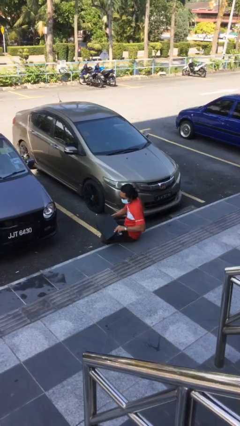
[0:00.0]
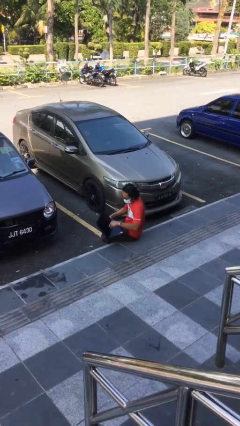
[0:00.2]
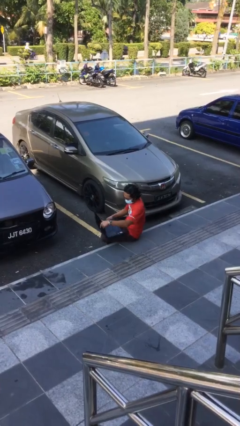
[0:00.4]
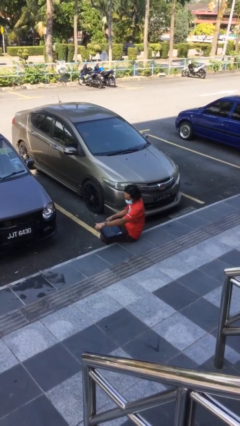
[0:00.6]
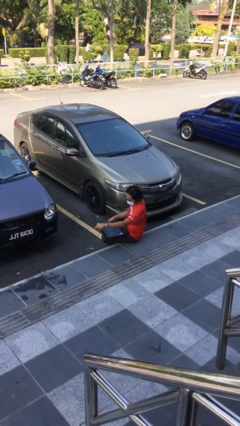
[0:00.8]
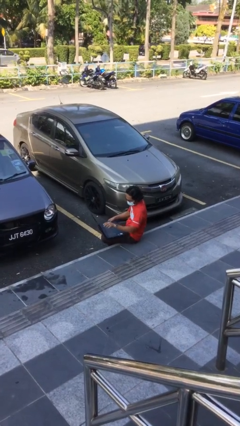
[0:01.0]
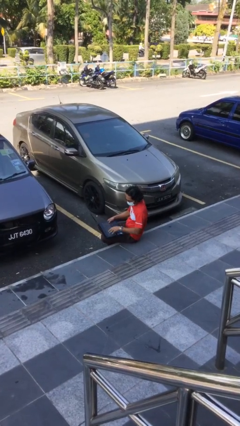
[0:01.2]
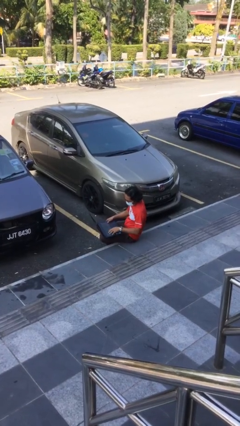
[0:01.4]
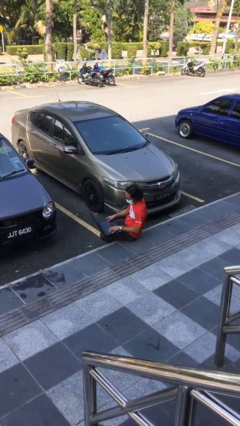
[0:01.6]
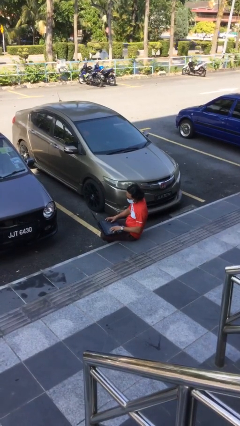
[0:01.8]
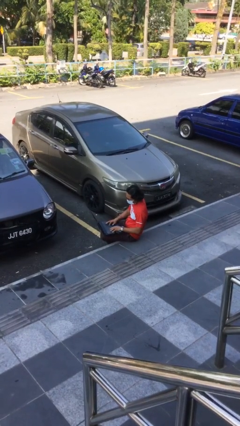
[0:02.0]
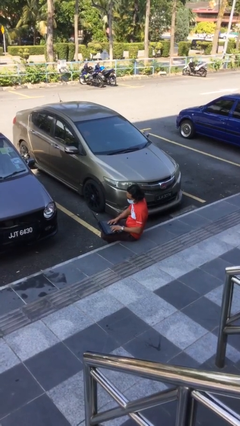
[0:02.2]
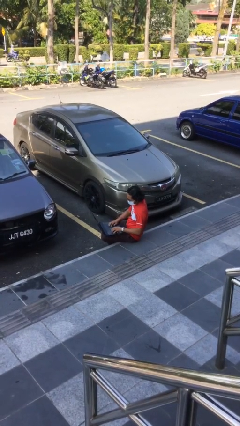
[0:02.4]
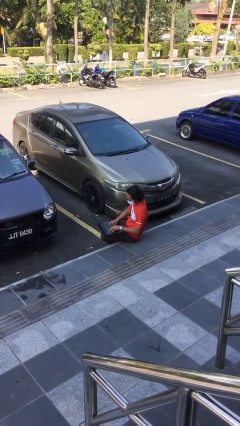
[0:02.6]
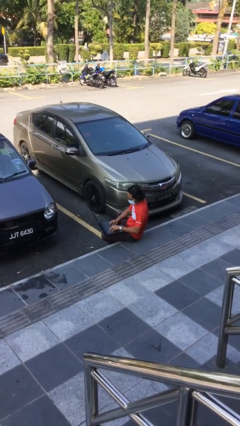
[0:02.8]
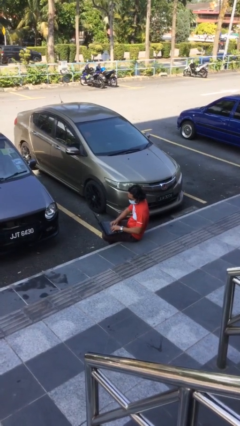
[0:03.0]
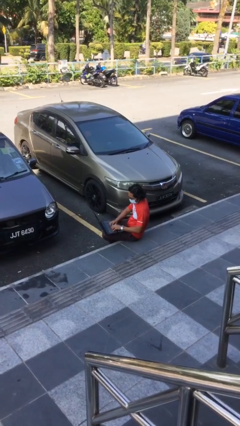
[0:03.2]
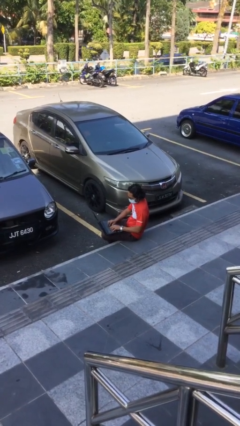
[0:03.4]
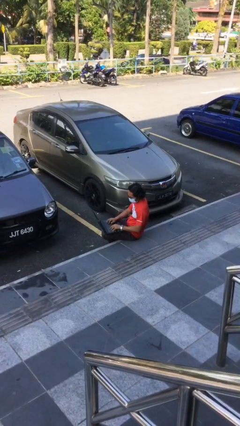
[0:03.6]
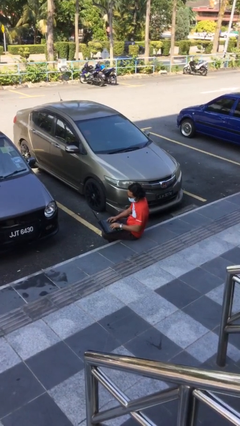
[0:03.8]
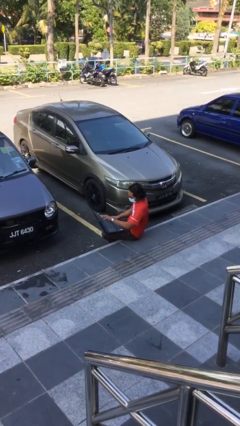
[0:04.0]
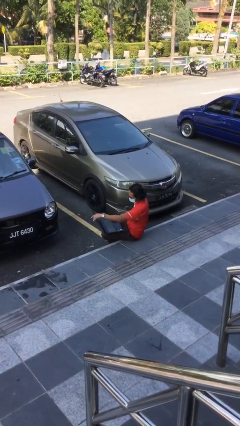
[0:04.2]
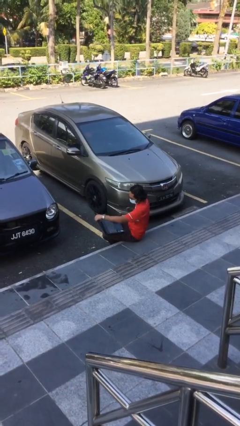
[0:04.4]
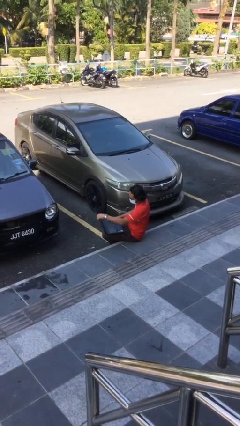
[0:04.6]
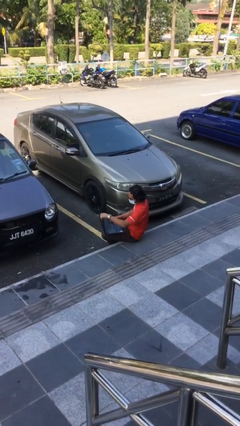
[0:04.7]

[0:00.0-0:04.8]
person interacts with laptop

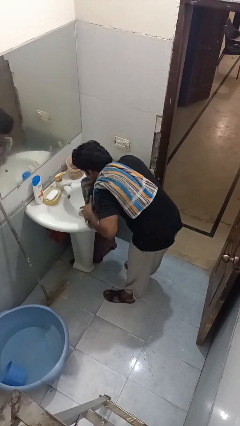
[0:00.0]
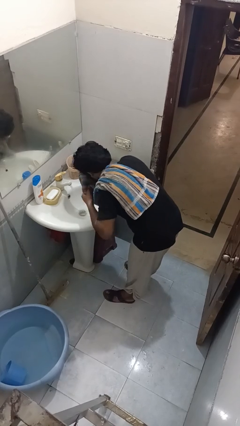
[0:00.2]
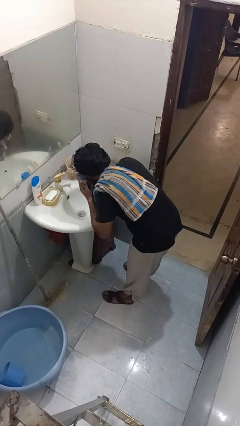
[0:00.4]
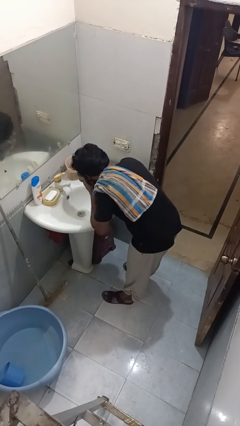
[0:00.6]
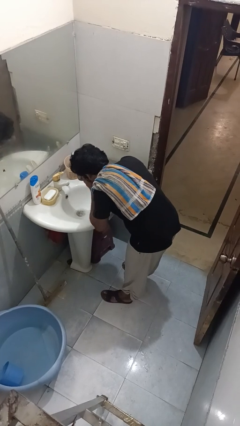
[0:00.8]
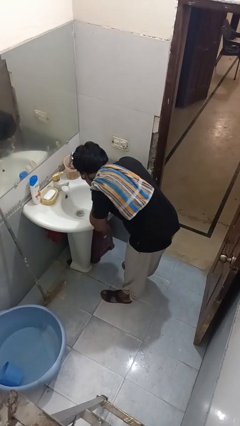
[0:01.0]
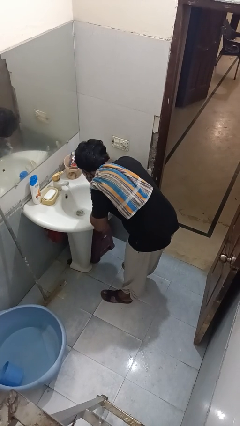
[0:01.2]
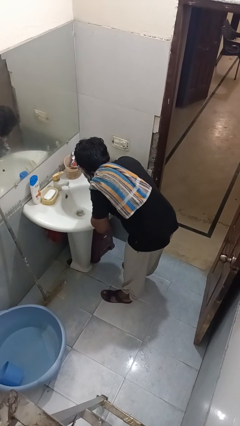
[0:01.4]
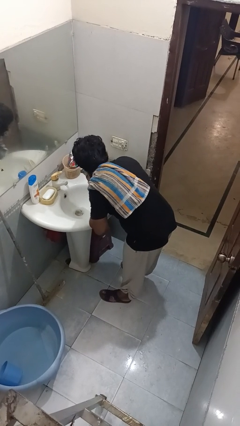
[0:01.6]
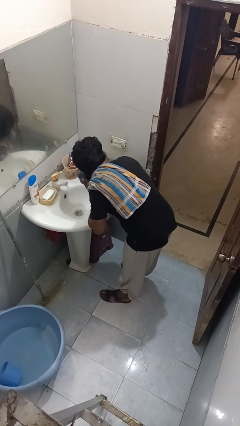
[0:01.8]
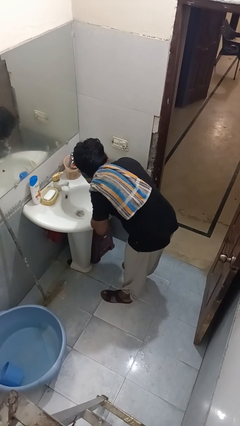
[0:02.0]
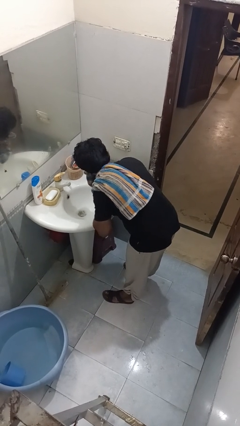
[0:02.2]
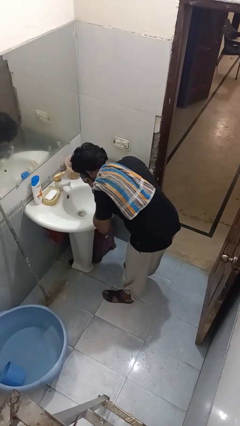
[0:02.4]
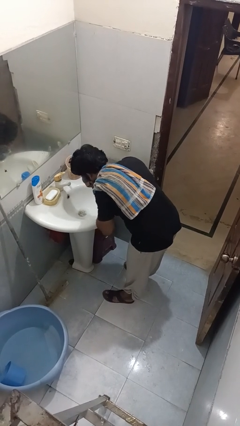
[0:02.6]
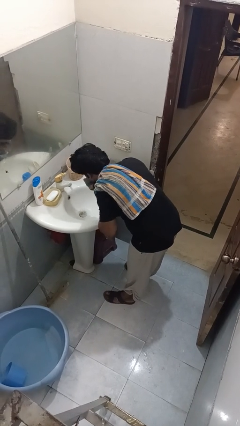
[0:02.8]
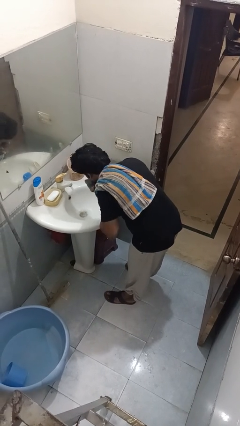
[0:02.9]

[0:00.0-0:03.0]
person dries face with towel

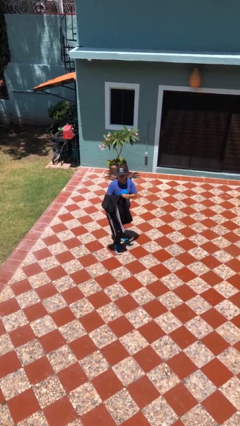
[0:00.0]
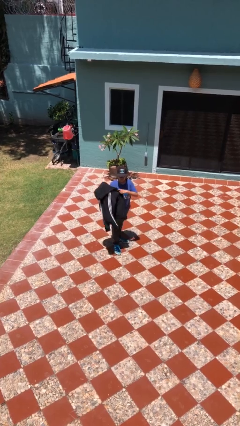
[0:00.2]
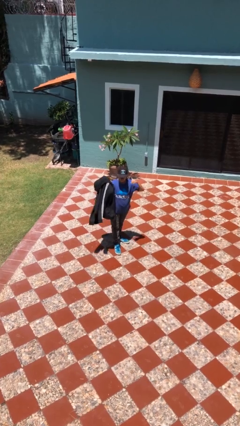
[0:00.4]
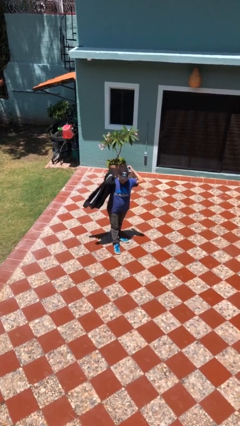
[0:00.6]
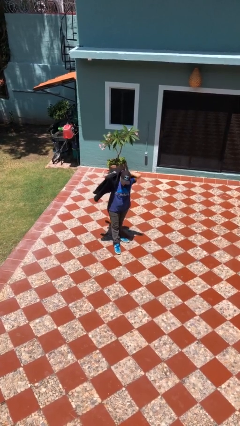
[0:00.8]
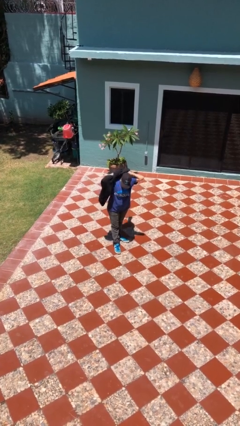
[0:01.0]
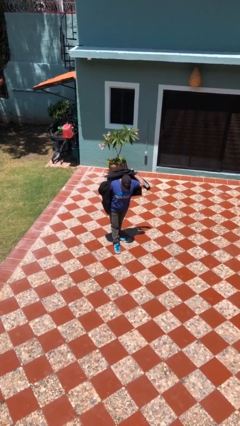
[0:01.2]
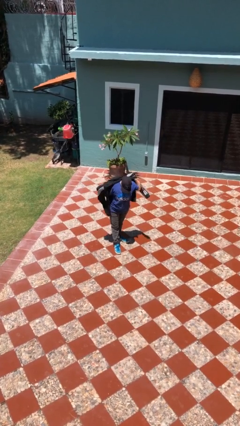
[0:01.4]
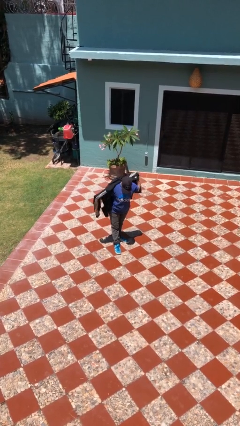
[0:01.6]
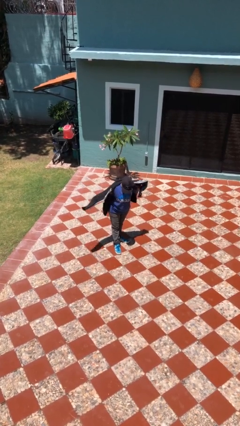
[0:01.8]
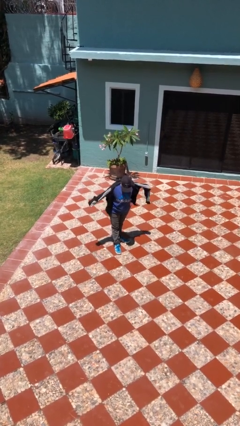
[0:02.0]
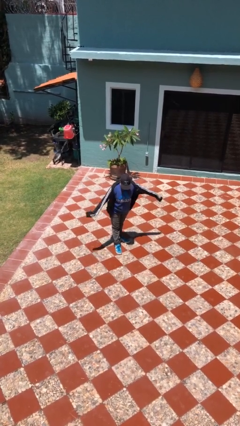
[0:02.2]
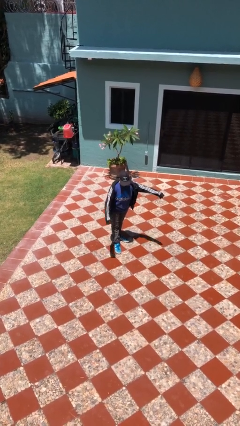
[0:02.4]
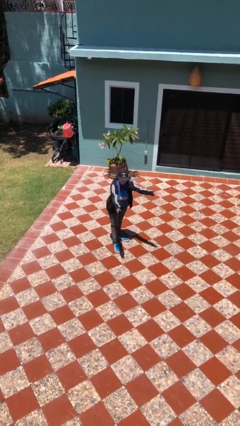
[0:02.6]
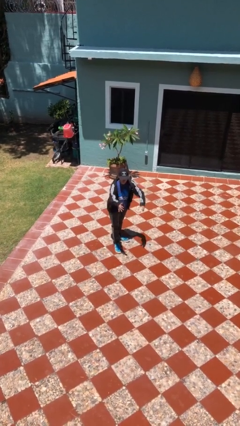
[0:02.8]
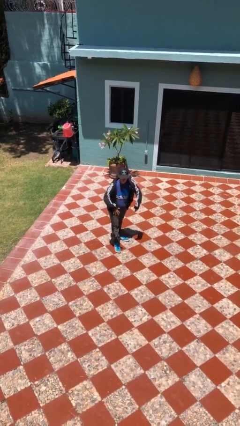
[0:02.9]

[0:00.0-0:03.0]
person puts on jacket

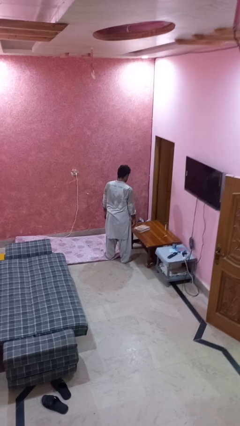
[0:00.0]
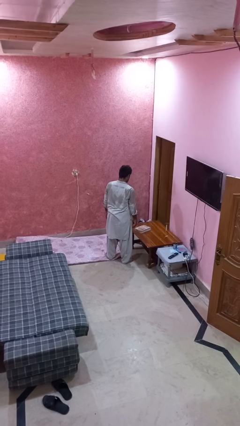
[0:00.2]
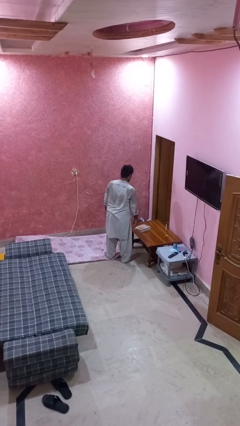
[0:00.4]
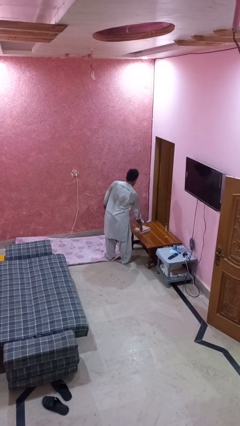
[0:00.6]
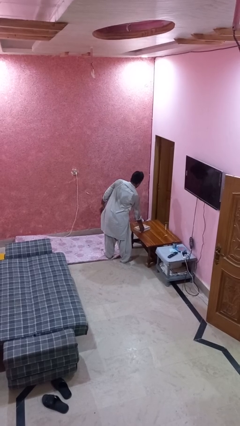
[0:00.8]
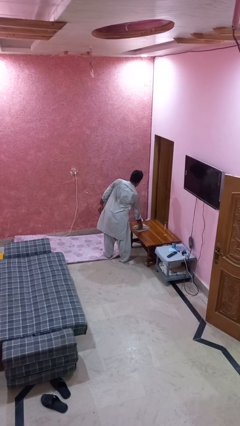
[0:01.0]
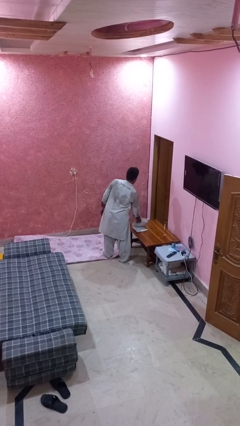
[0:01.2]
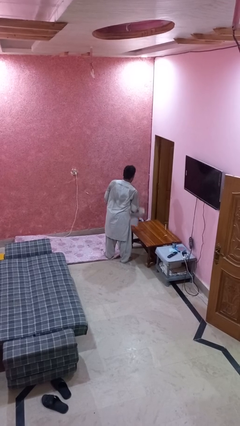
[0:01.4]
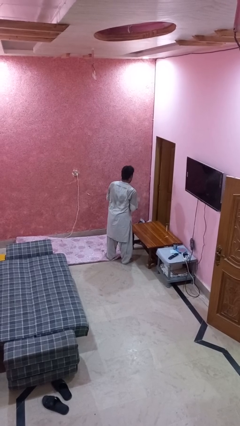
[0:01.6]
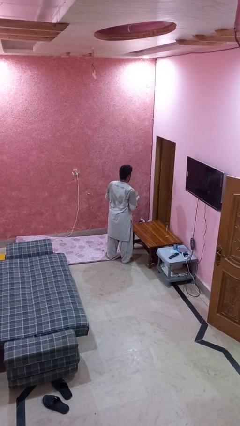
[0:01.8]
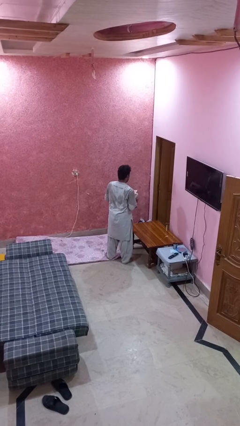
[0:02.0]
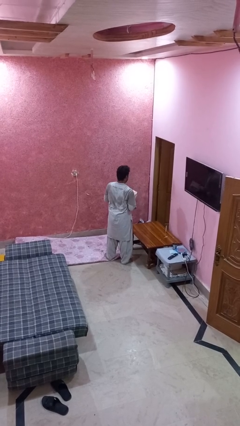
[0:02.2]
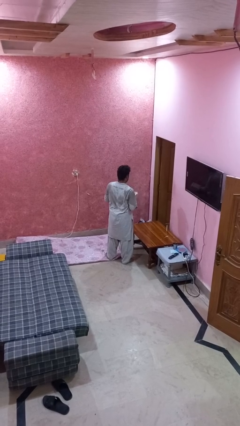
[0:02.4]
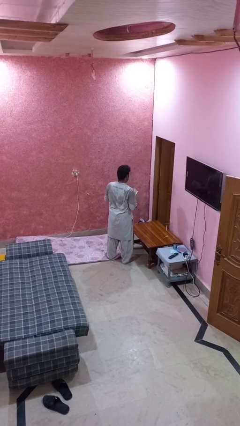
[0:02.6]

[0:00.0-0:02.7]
person picks up object from table

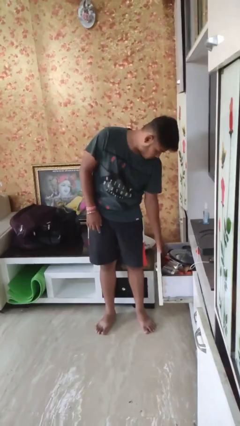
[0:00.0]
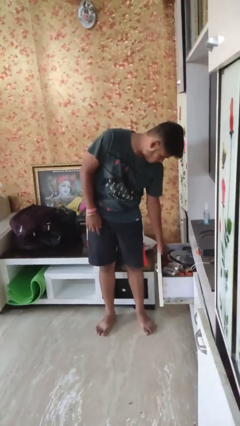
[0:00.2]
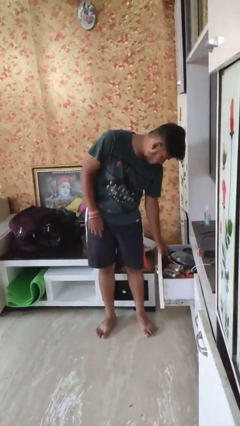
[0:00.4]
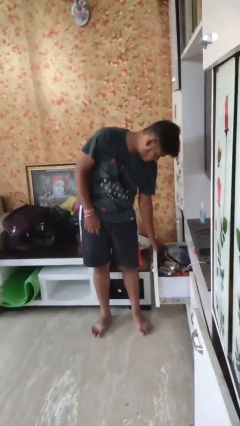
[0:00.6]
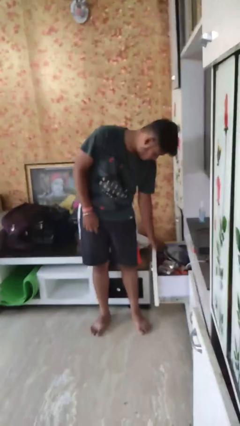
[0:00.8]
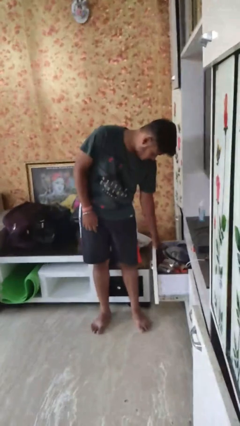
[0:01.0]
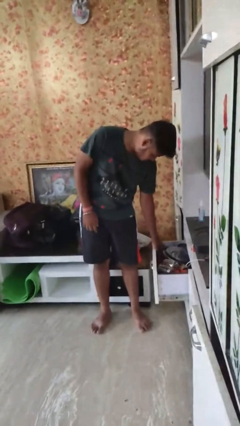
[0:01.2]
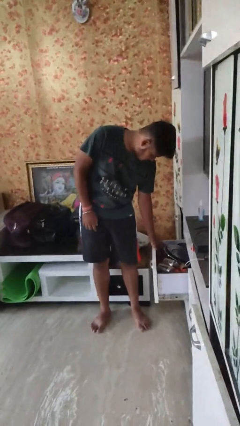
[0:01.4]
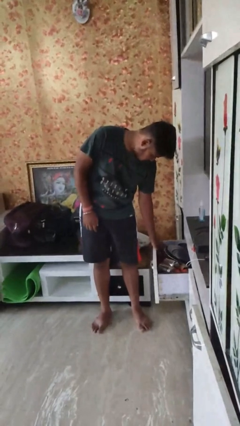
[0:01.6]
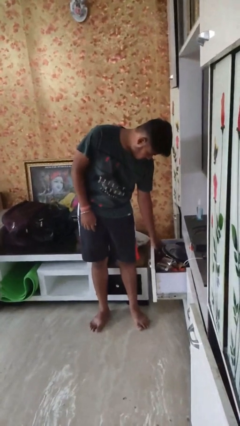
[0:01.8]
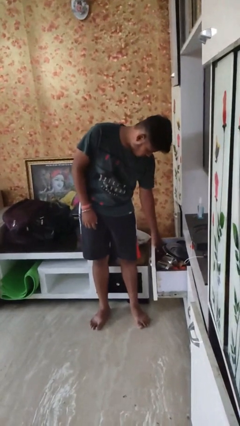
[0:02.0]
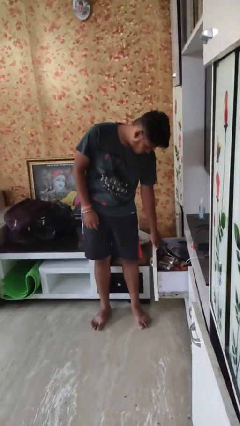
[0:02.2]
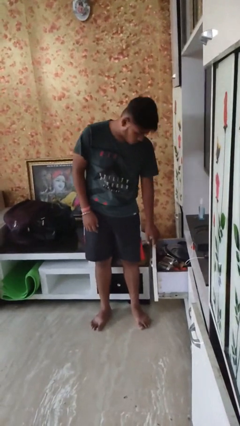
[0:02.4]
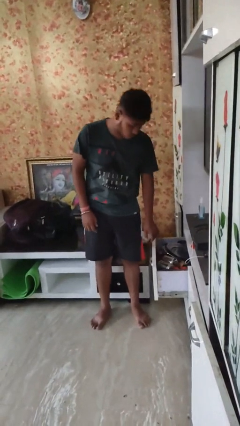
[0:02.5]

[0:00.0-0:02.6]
person searches in kitchen drawer

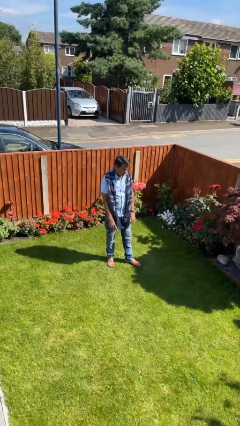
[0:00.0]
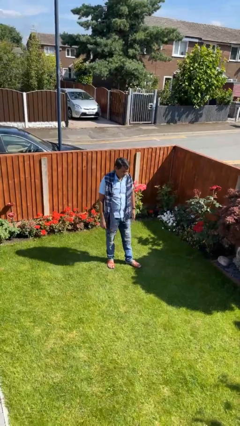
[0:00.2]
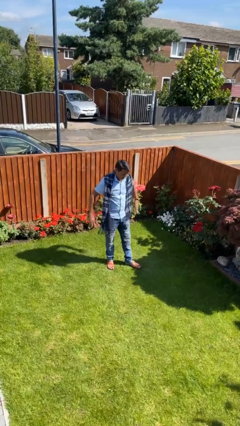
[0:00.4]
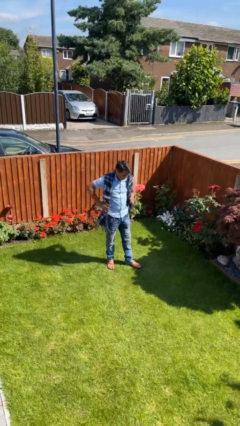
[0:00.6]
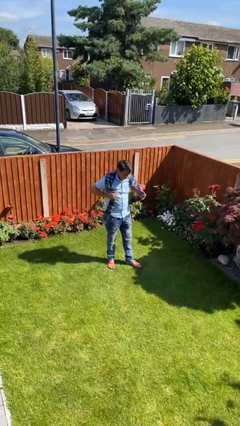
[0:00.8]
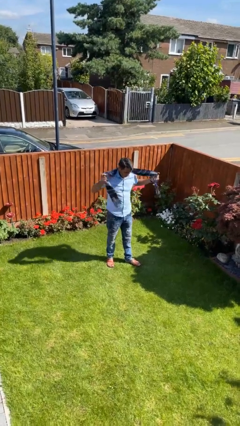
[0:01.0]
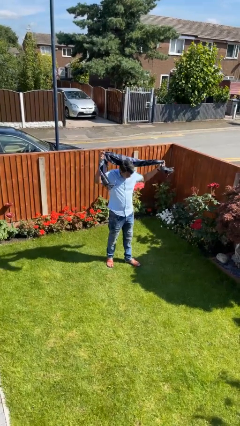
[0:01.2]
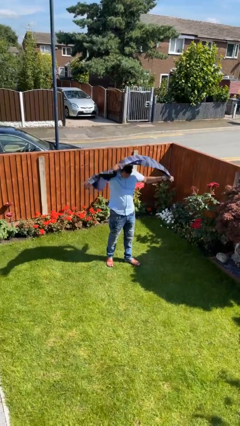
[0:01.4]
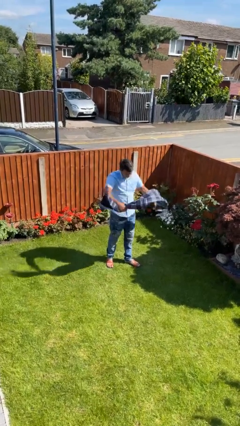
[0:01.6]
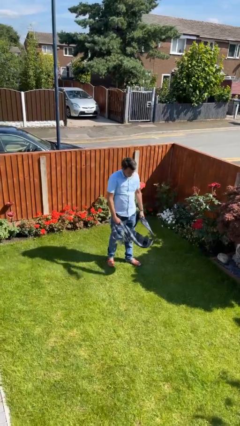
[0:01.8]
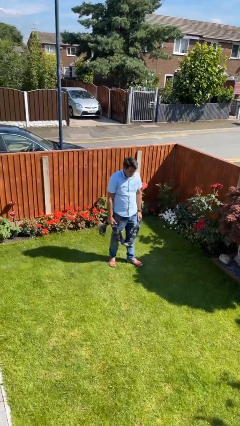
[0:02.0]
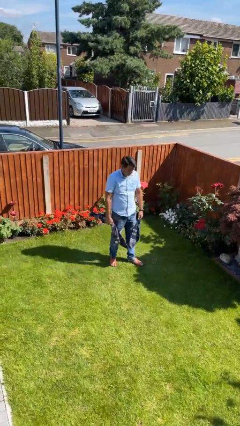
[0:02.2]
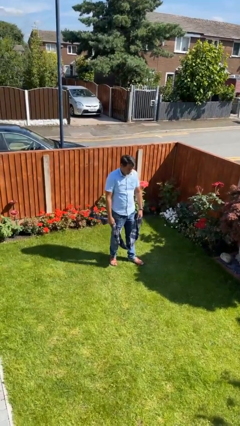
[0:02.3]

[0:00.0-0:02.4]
person takes off scarf
